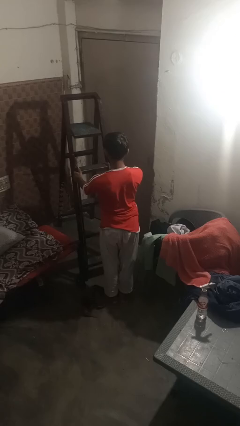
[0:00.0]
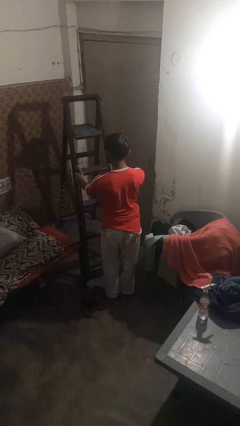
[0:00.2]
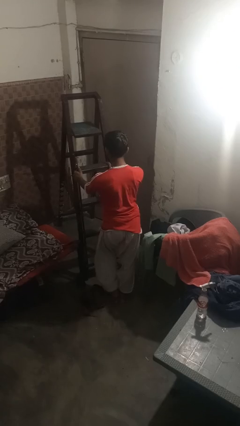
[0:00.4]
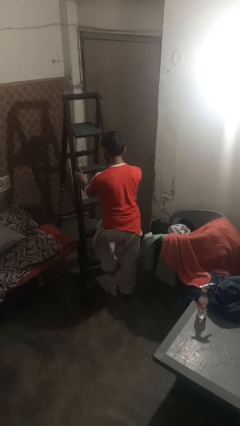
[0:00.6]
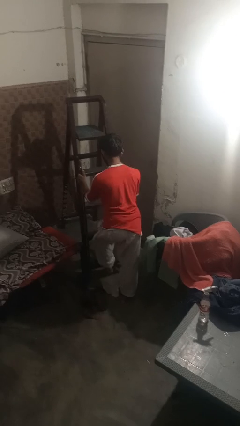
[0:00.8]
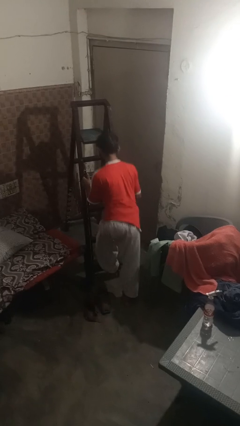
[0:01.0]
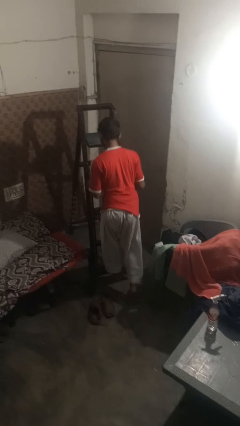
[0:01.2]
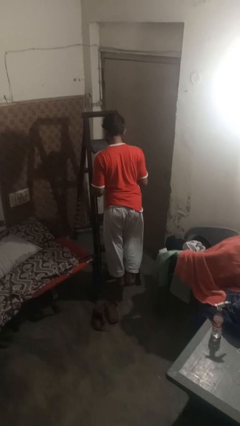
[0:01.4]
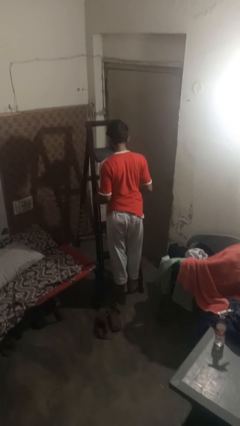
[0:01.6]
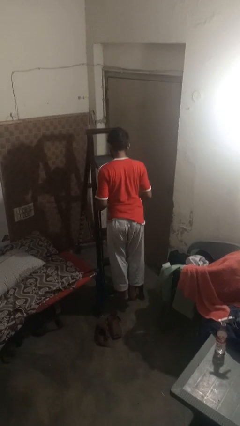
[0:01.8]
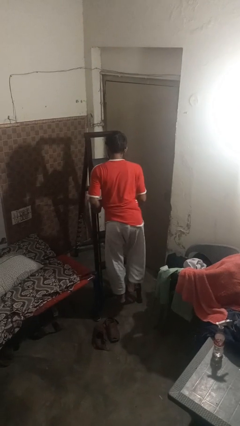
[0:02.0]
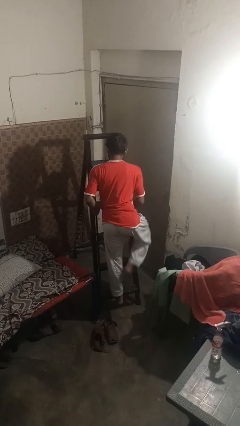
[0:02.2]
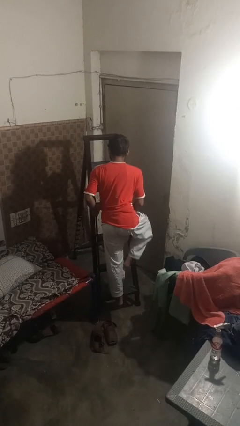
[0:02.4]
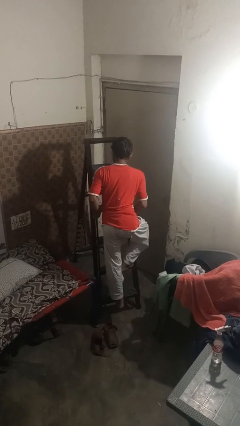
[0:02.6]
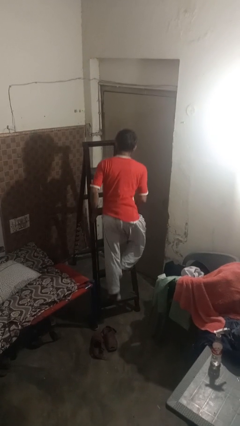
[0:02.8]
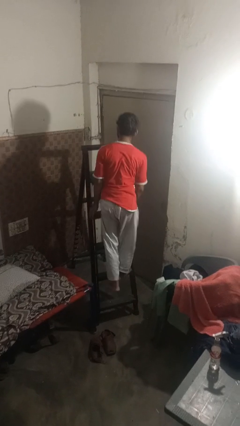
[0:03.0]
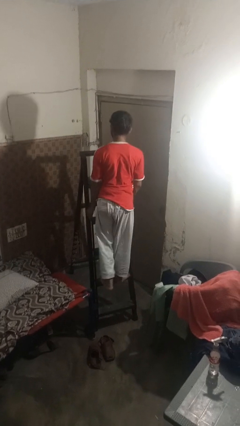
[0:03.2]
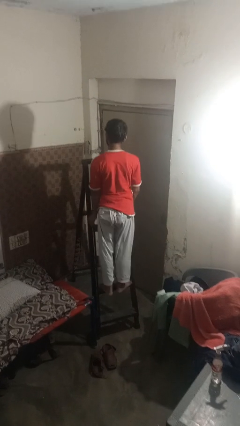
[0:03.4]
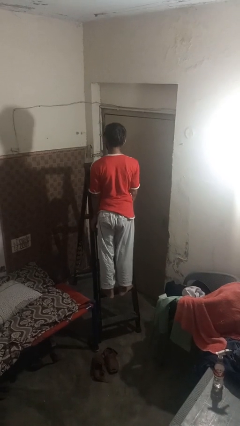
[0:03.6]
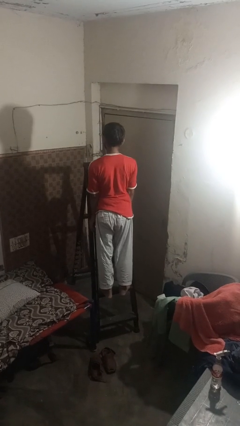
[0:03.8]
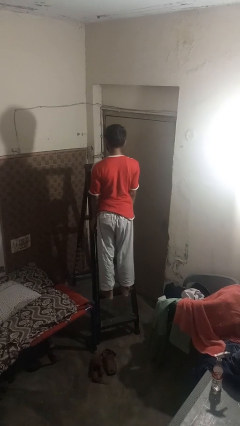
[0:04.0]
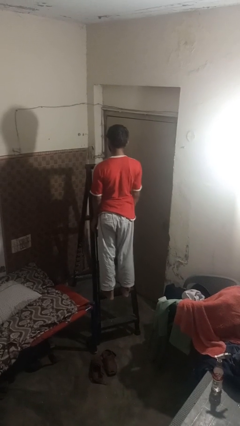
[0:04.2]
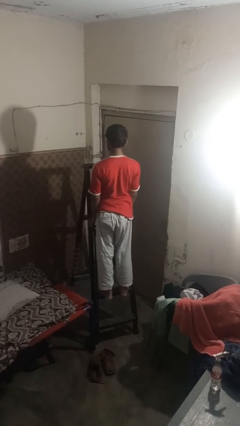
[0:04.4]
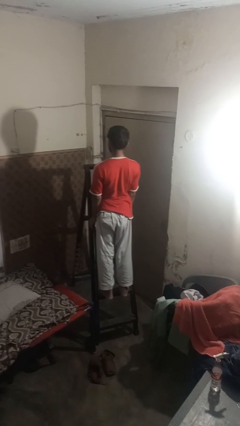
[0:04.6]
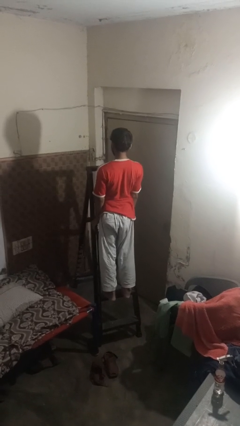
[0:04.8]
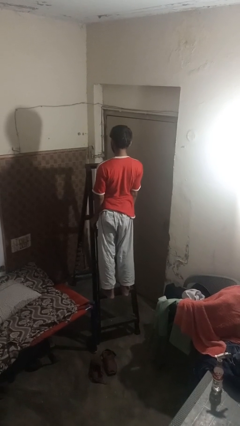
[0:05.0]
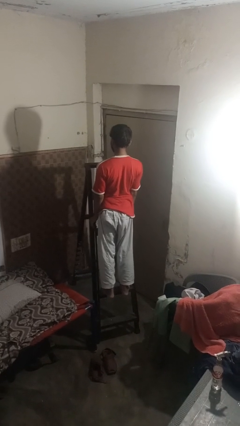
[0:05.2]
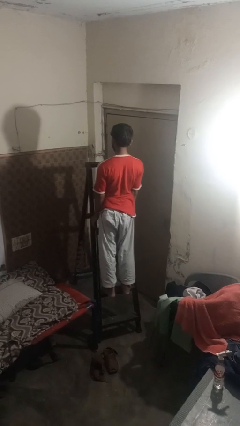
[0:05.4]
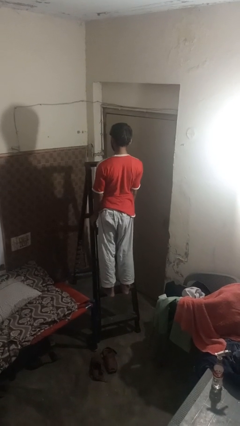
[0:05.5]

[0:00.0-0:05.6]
person climbs up ladder

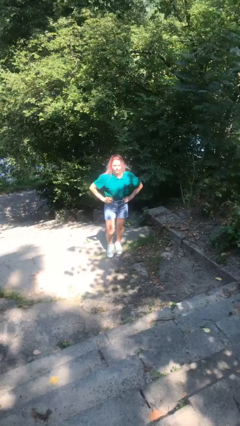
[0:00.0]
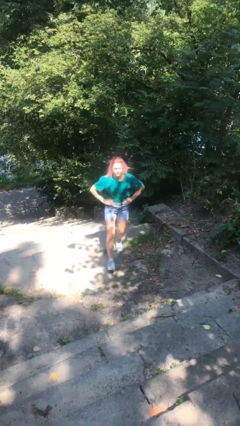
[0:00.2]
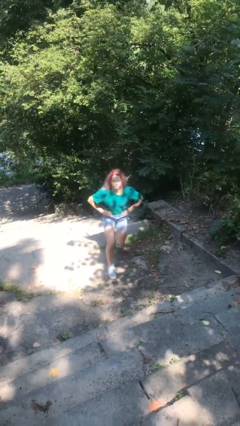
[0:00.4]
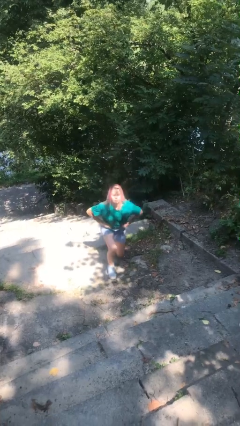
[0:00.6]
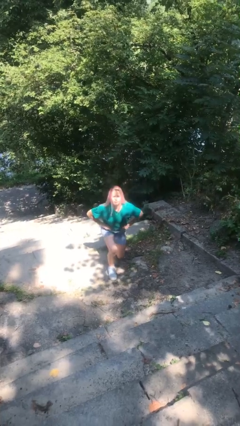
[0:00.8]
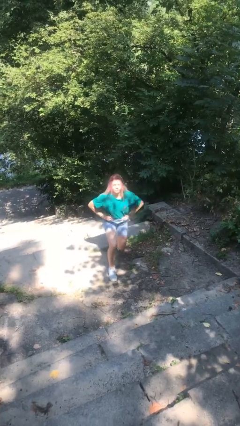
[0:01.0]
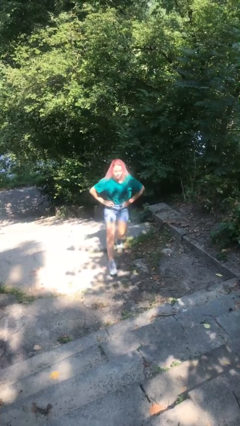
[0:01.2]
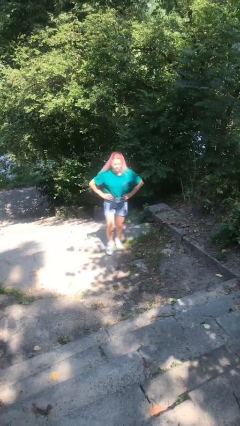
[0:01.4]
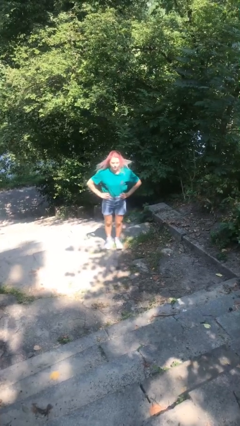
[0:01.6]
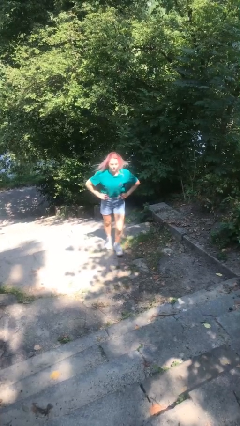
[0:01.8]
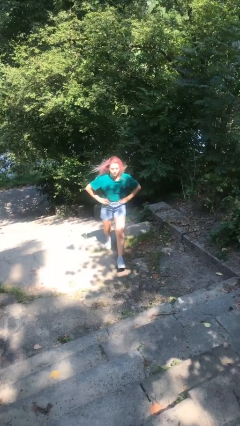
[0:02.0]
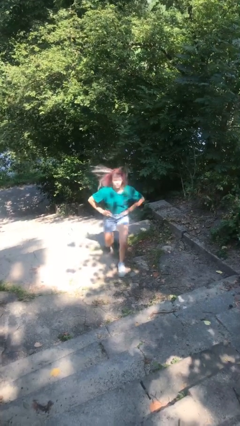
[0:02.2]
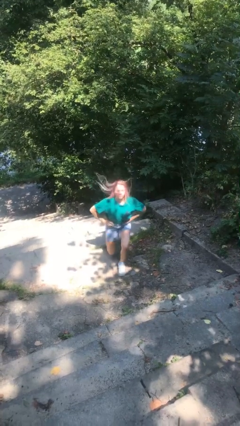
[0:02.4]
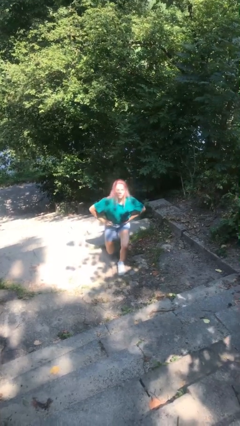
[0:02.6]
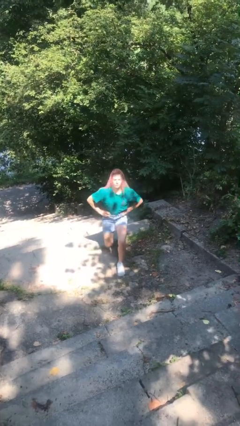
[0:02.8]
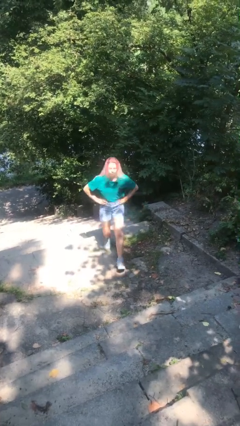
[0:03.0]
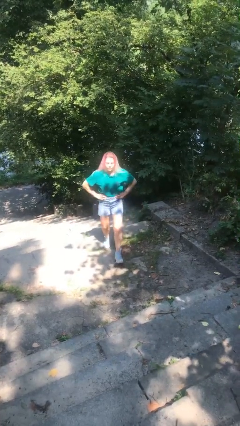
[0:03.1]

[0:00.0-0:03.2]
person exercises with lunges

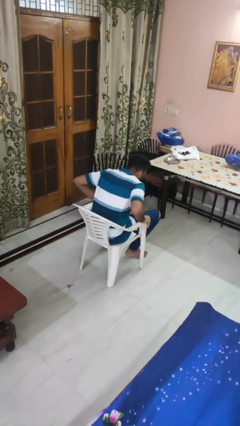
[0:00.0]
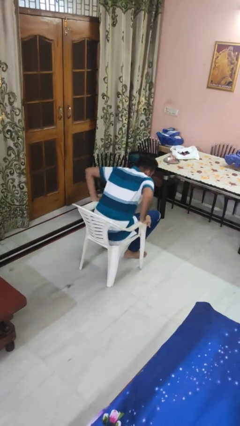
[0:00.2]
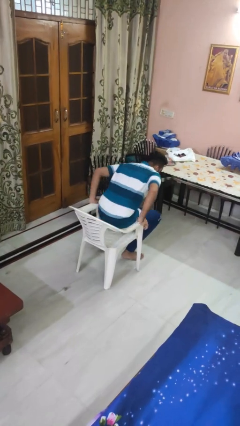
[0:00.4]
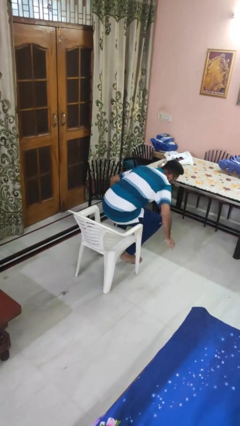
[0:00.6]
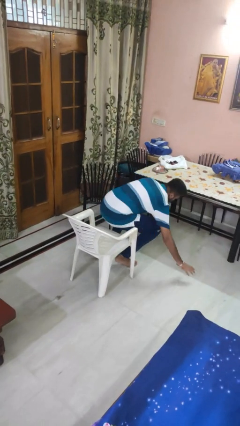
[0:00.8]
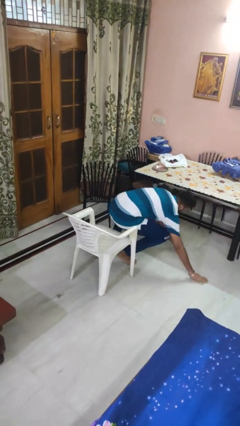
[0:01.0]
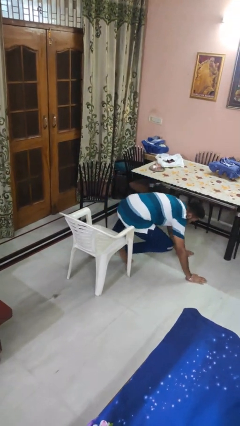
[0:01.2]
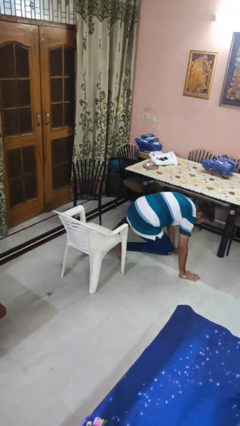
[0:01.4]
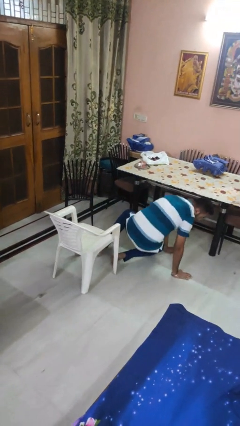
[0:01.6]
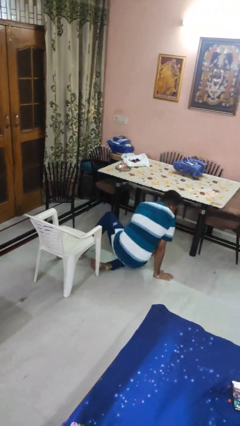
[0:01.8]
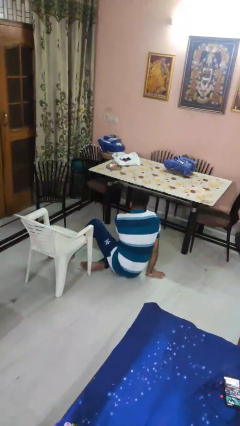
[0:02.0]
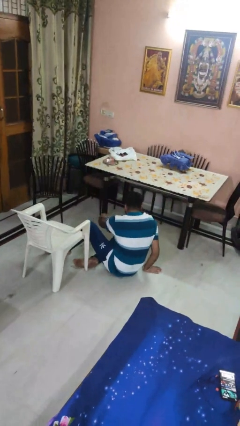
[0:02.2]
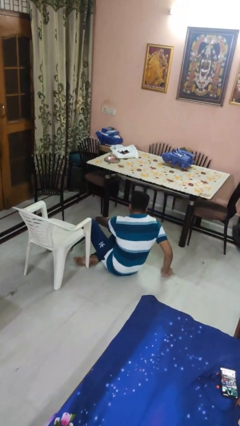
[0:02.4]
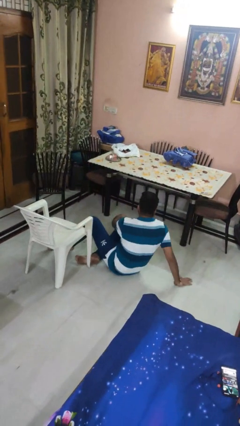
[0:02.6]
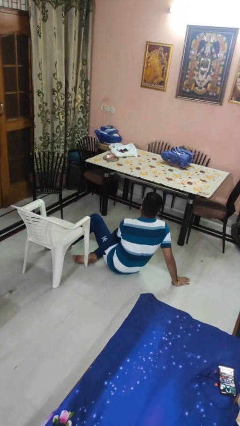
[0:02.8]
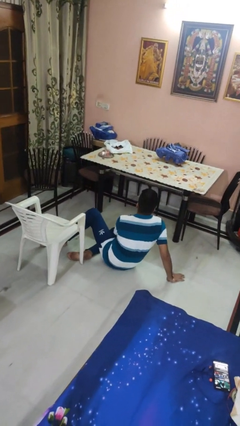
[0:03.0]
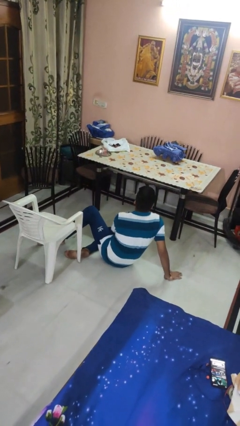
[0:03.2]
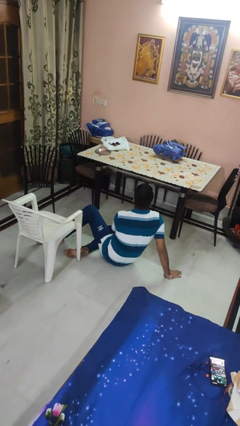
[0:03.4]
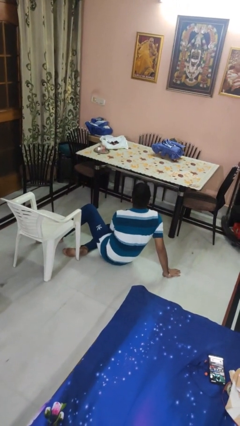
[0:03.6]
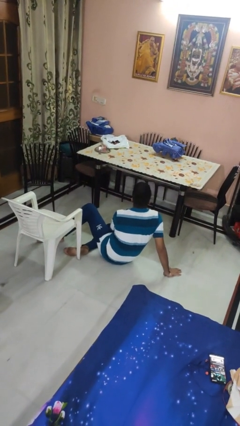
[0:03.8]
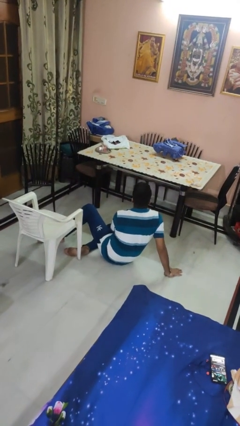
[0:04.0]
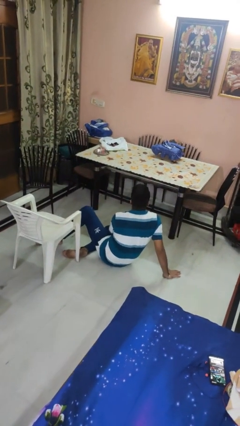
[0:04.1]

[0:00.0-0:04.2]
person falls from chair

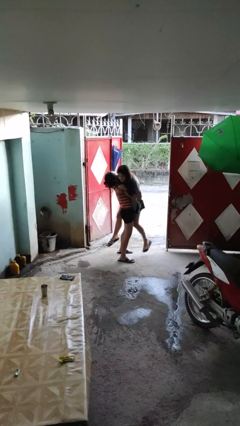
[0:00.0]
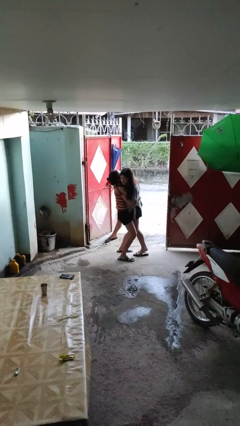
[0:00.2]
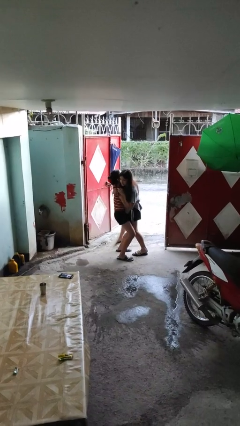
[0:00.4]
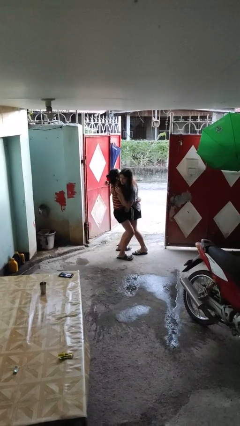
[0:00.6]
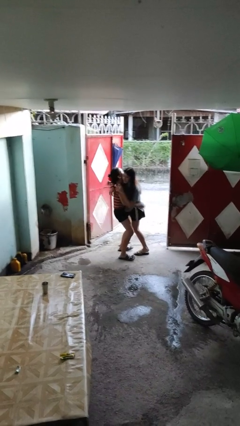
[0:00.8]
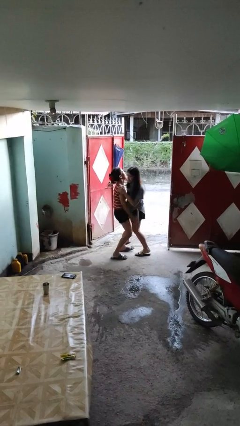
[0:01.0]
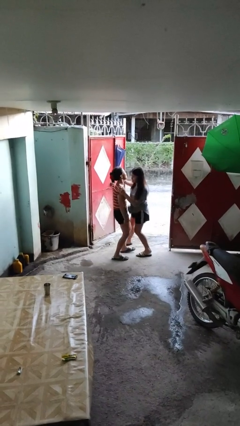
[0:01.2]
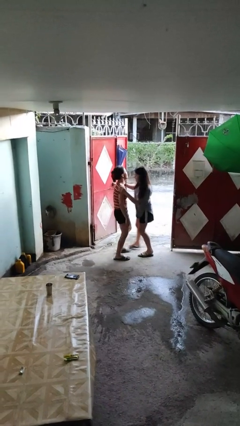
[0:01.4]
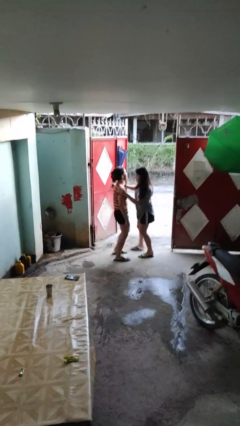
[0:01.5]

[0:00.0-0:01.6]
person puts down person

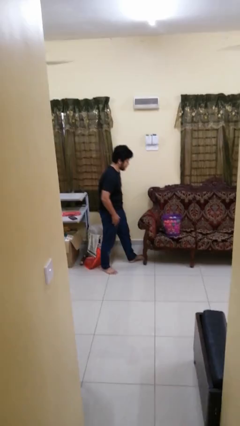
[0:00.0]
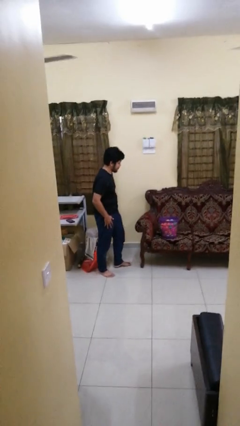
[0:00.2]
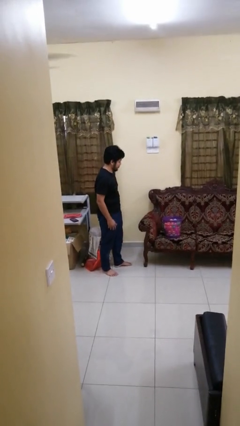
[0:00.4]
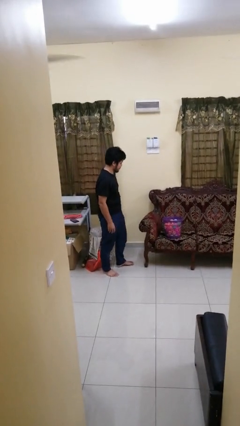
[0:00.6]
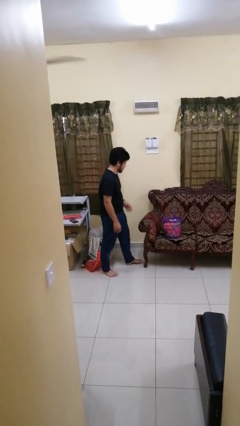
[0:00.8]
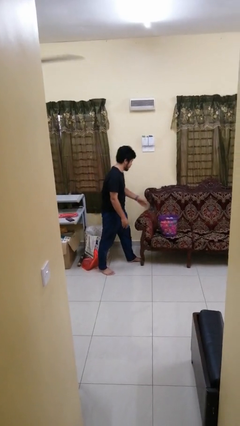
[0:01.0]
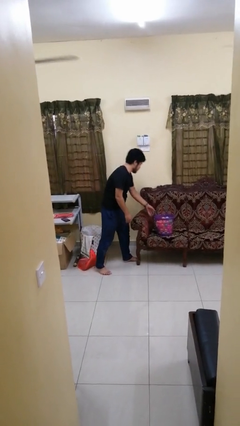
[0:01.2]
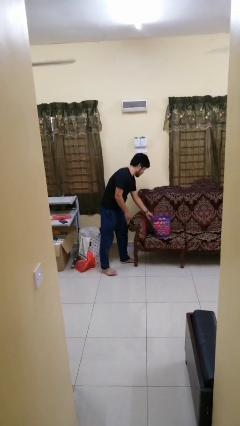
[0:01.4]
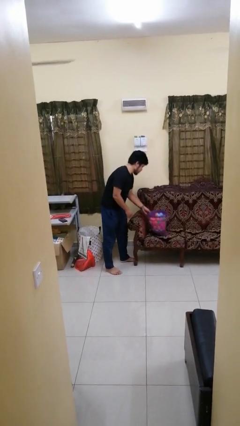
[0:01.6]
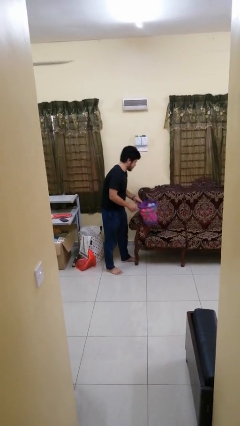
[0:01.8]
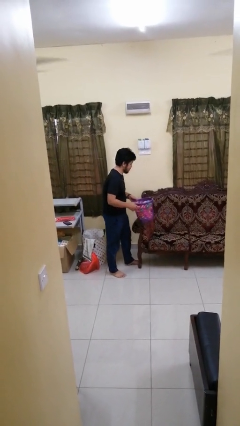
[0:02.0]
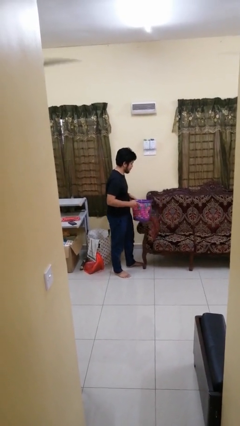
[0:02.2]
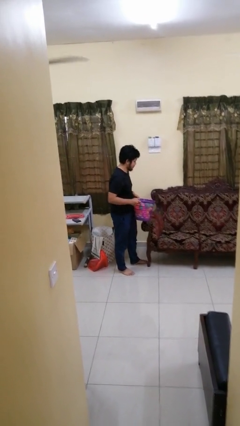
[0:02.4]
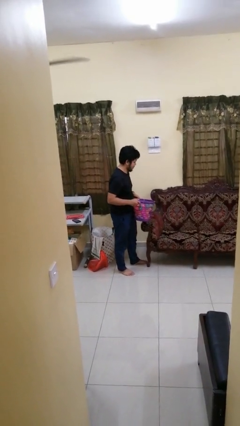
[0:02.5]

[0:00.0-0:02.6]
person puts down object on couch
